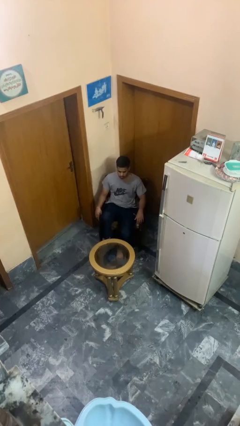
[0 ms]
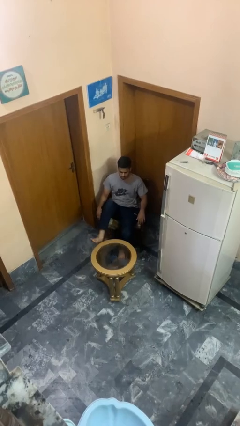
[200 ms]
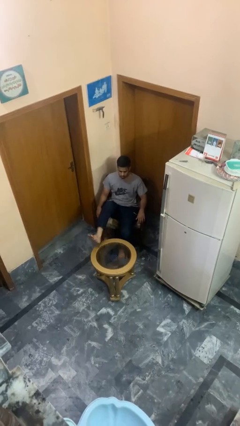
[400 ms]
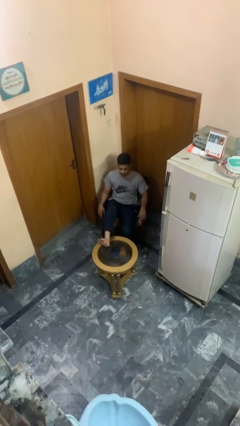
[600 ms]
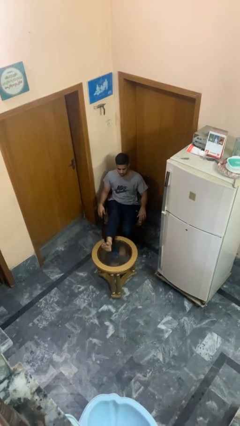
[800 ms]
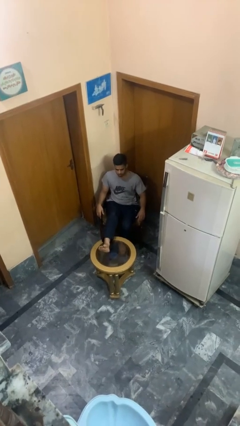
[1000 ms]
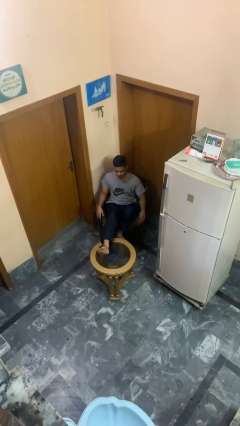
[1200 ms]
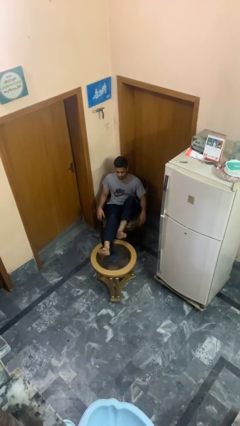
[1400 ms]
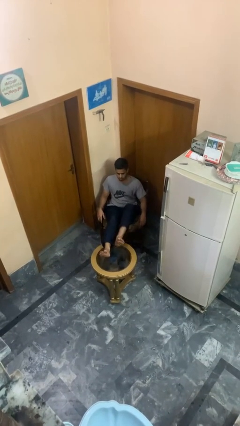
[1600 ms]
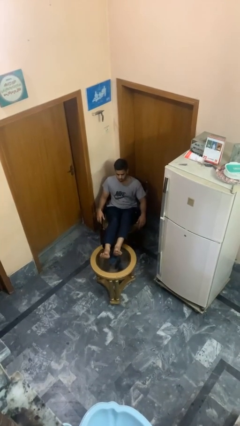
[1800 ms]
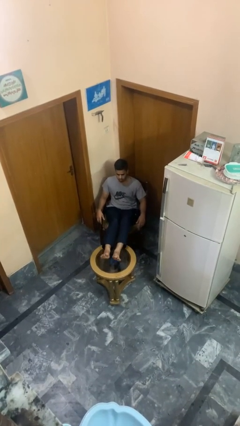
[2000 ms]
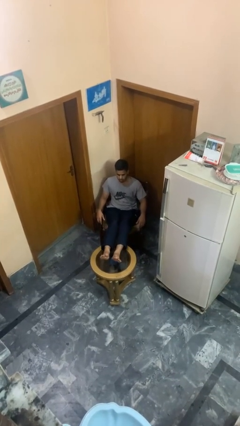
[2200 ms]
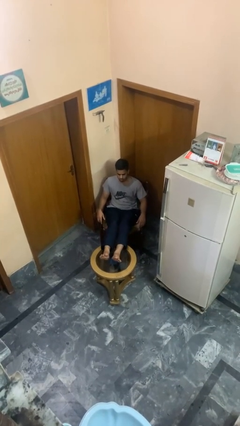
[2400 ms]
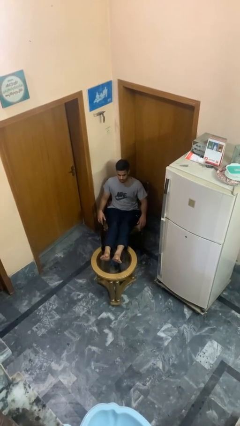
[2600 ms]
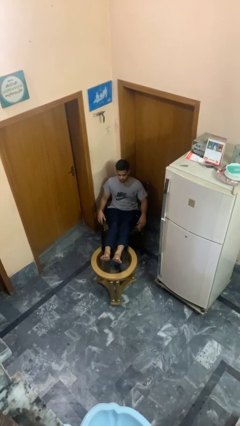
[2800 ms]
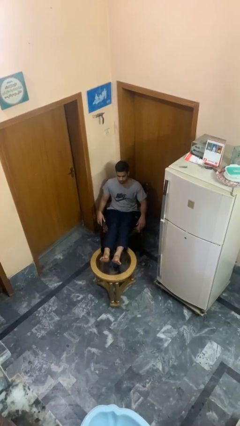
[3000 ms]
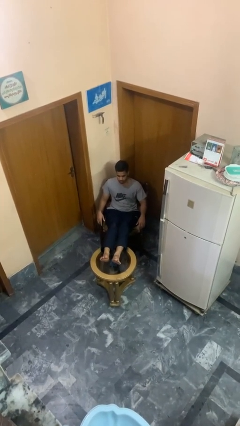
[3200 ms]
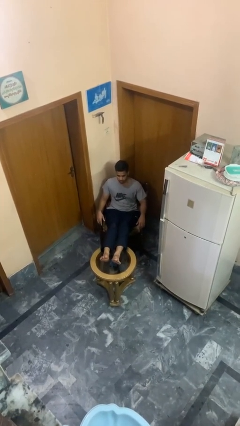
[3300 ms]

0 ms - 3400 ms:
person puts feet up

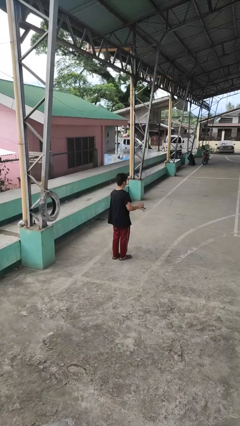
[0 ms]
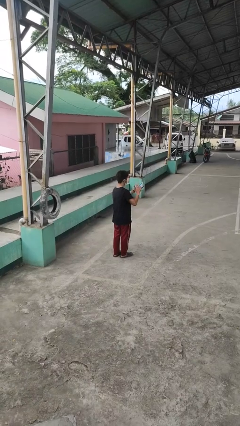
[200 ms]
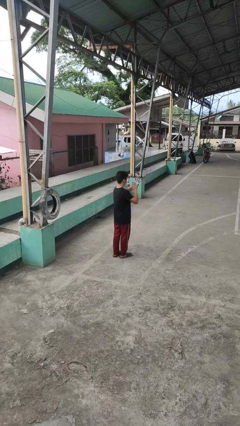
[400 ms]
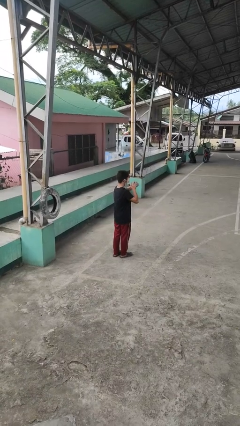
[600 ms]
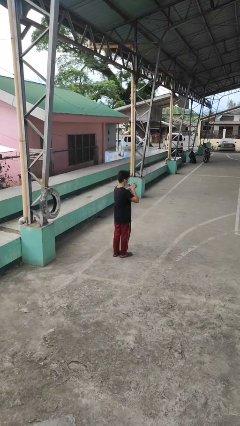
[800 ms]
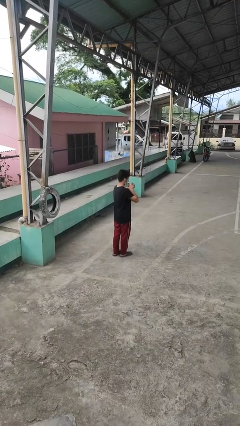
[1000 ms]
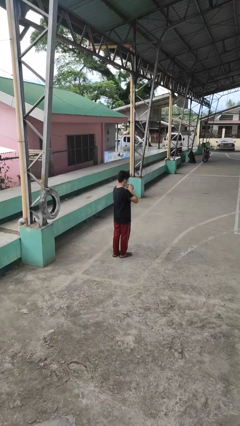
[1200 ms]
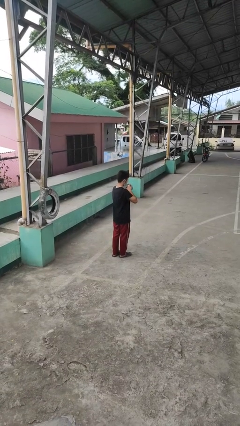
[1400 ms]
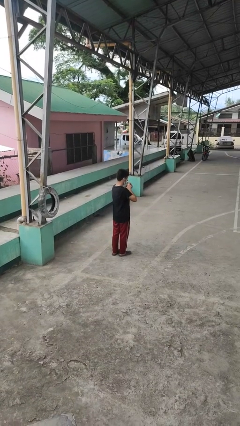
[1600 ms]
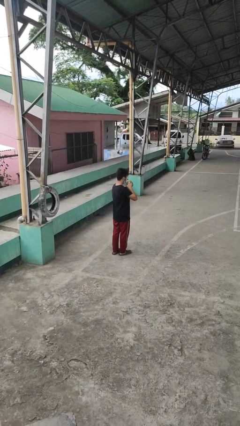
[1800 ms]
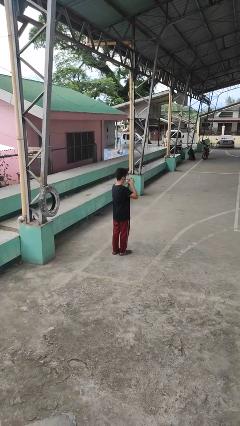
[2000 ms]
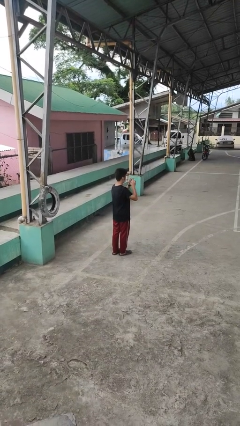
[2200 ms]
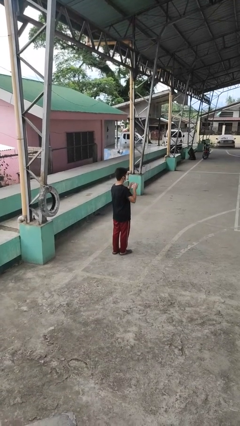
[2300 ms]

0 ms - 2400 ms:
person squeezes object

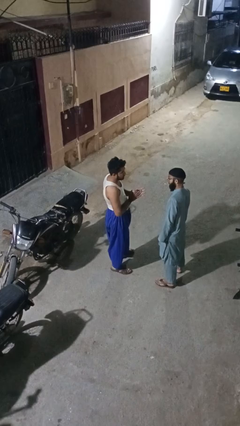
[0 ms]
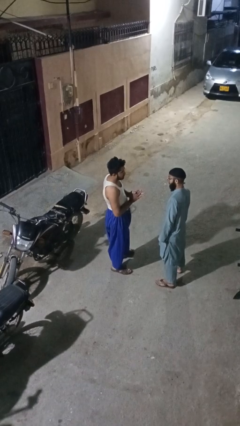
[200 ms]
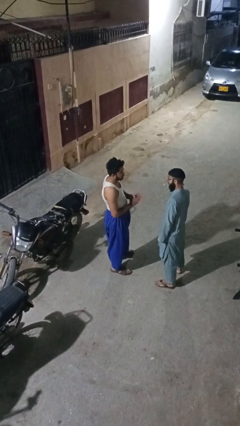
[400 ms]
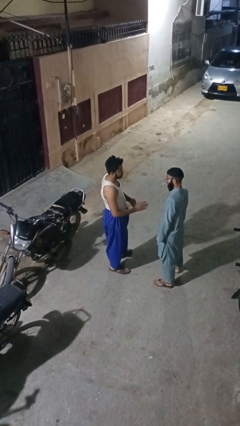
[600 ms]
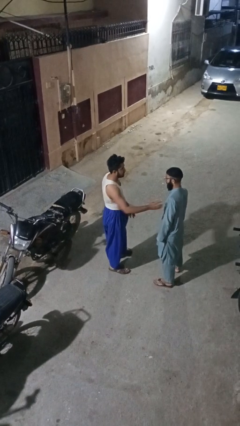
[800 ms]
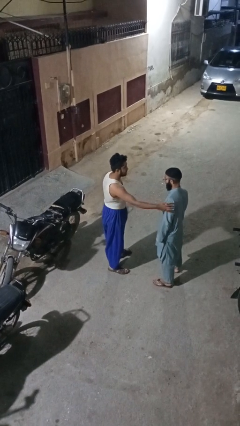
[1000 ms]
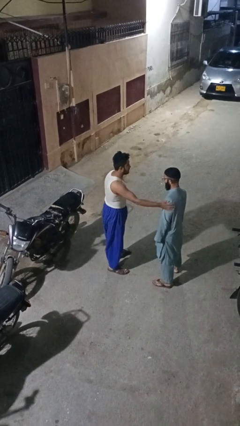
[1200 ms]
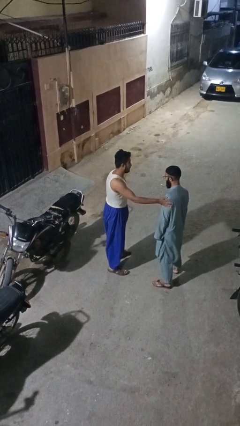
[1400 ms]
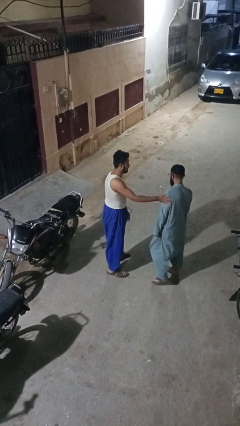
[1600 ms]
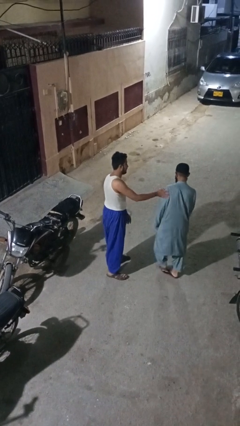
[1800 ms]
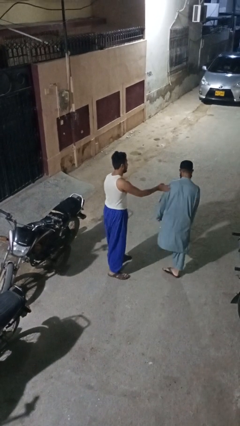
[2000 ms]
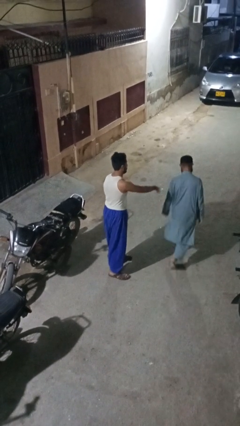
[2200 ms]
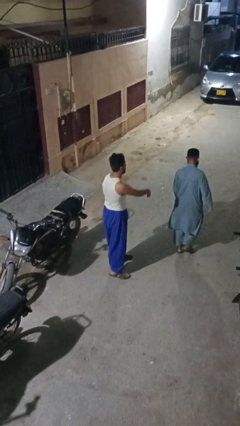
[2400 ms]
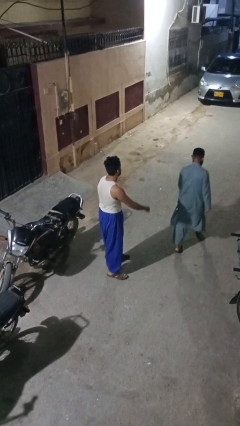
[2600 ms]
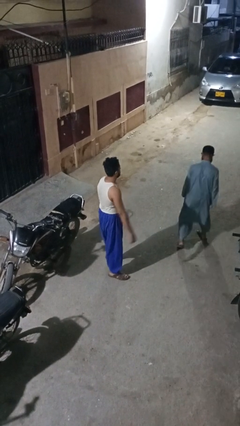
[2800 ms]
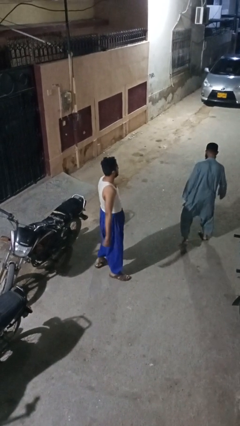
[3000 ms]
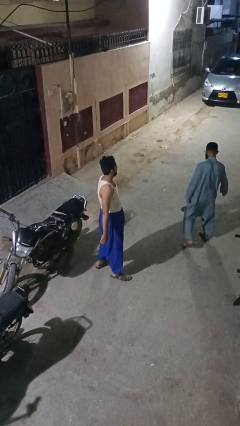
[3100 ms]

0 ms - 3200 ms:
person shoves person

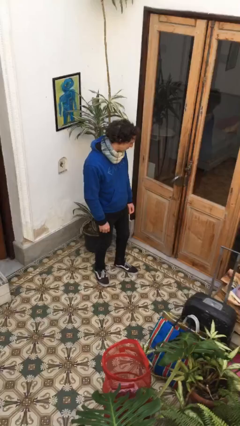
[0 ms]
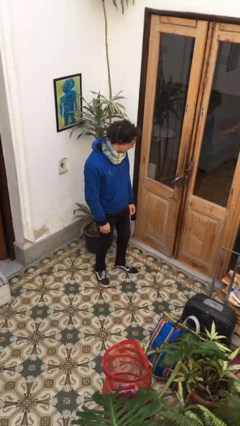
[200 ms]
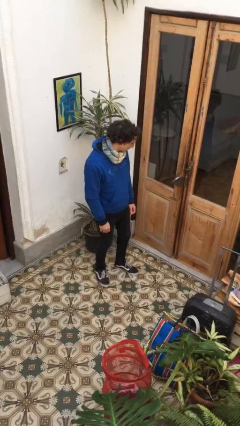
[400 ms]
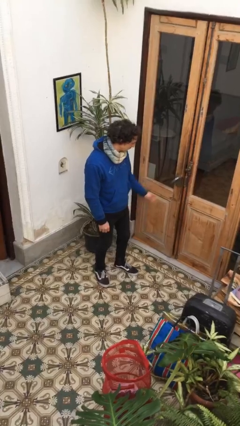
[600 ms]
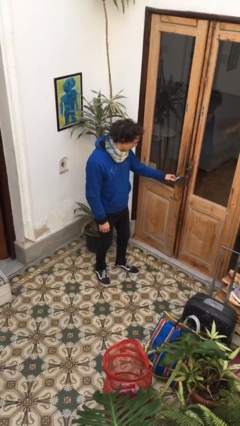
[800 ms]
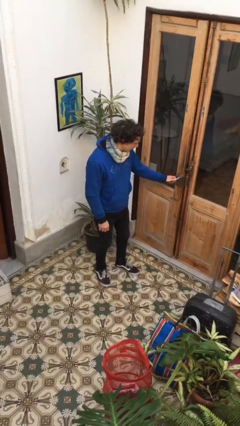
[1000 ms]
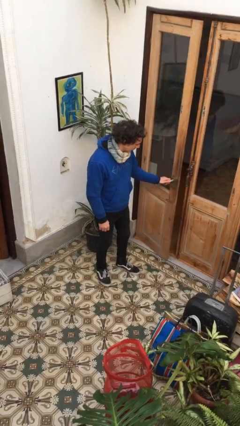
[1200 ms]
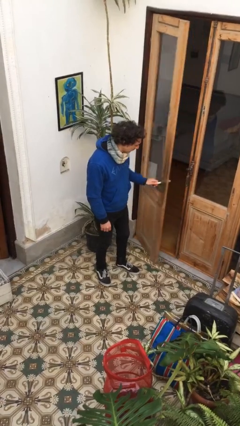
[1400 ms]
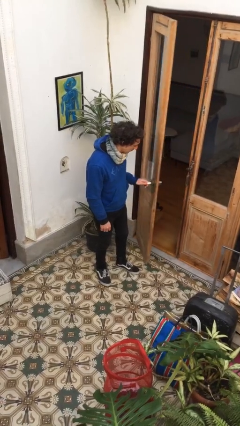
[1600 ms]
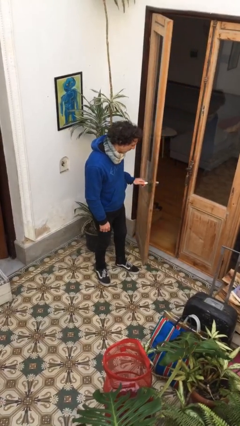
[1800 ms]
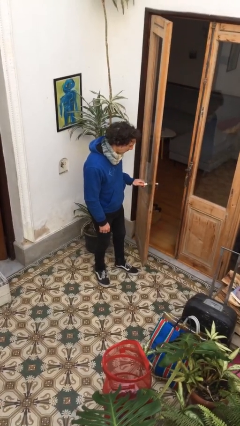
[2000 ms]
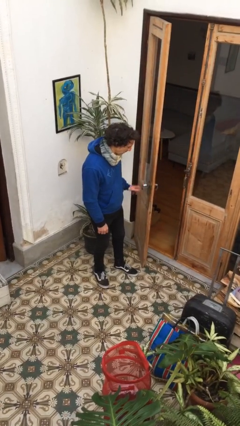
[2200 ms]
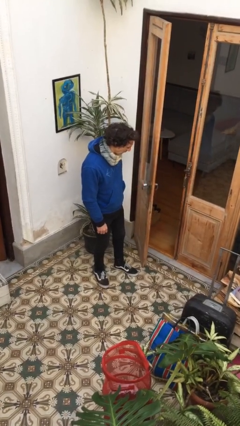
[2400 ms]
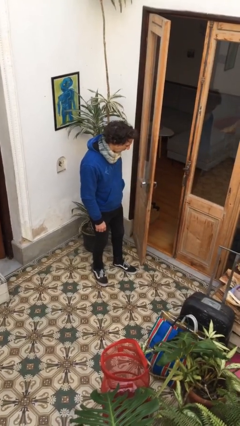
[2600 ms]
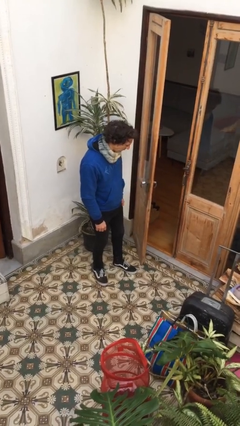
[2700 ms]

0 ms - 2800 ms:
person opens facility door

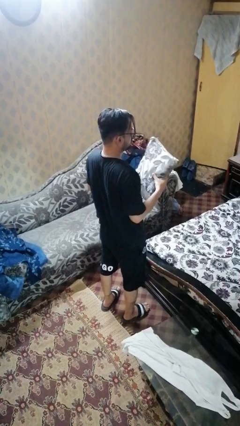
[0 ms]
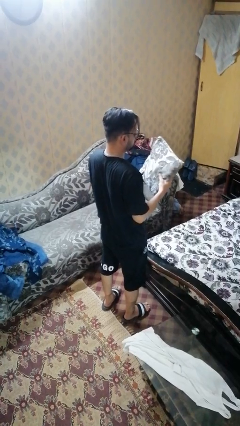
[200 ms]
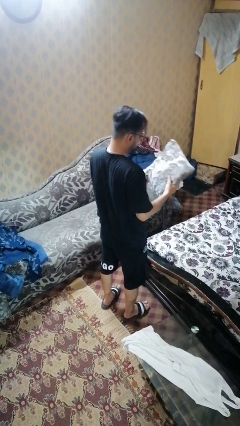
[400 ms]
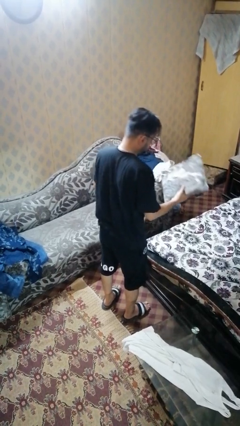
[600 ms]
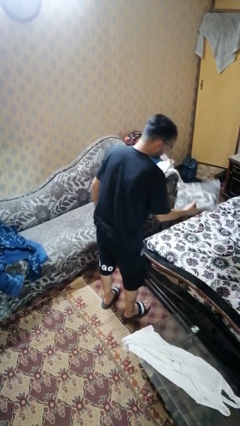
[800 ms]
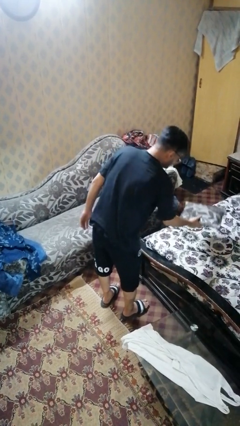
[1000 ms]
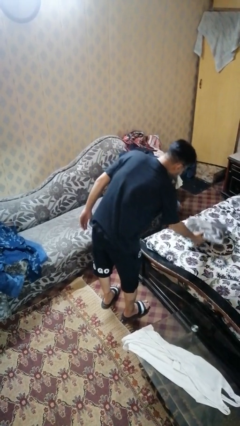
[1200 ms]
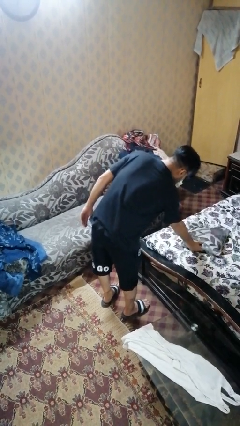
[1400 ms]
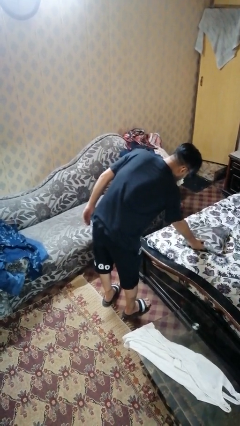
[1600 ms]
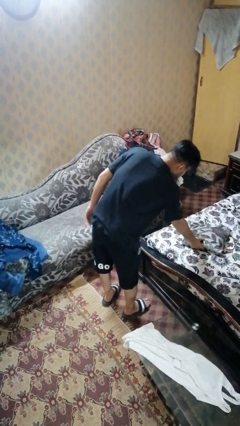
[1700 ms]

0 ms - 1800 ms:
person puts down object on bed

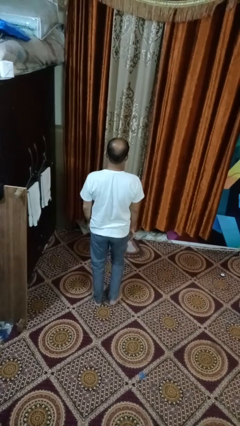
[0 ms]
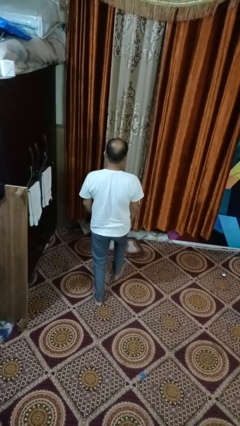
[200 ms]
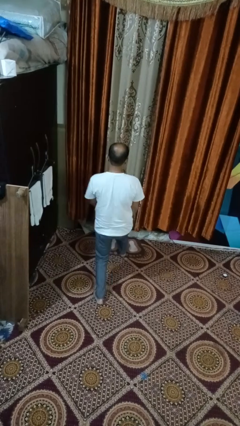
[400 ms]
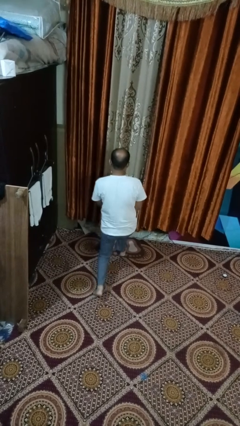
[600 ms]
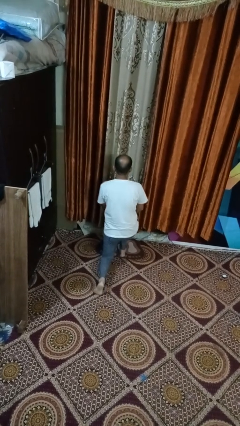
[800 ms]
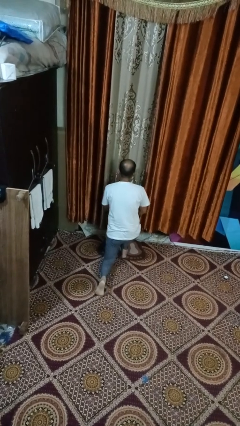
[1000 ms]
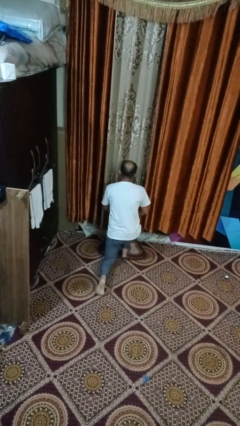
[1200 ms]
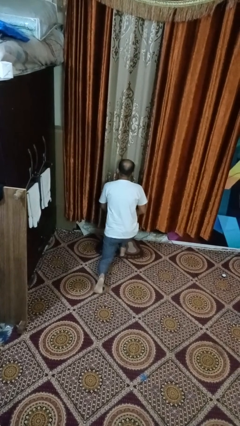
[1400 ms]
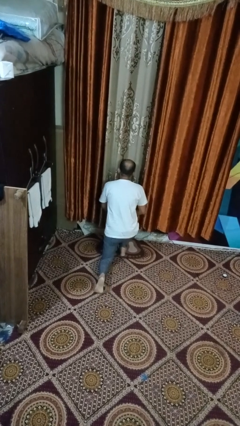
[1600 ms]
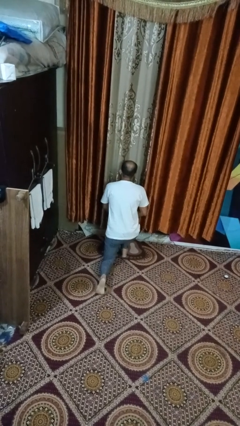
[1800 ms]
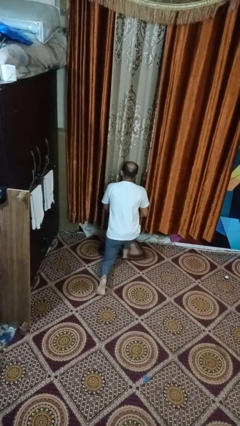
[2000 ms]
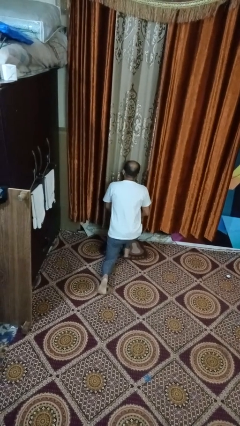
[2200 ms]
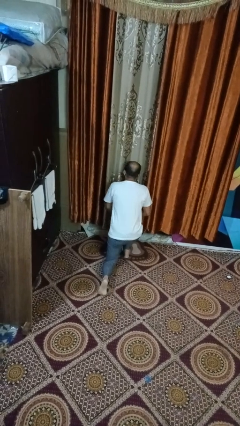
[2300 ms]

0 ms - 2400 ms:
person kneels

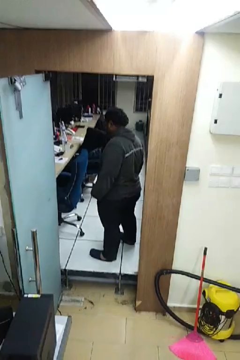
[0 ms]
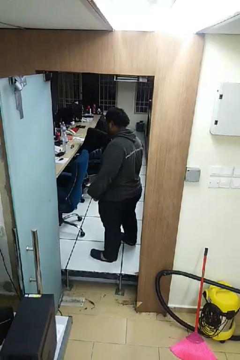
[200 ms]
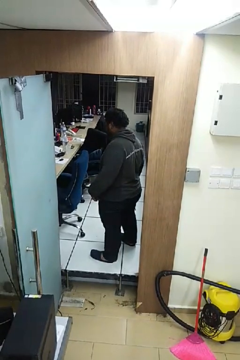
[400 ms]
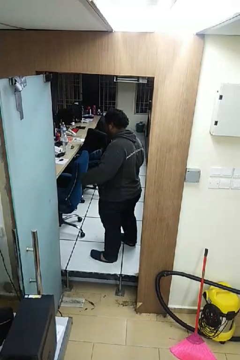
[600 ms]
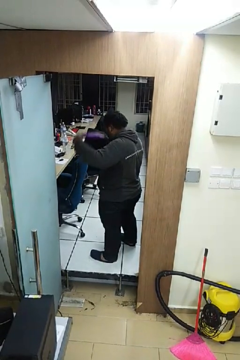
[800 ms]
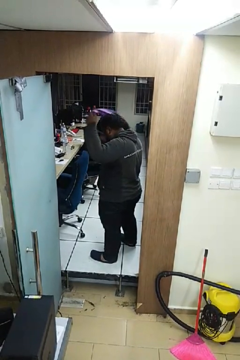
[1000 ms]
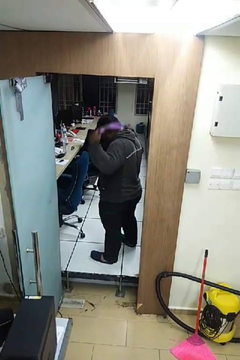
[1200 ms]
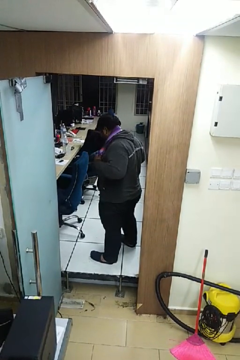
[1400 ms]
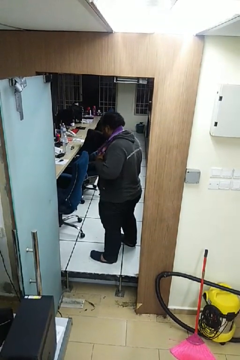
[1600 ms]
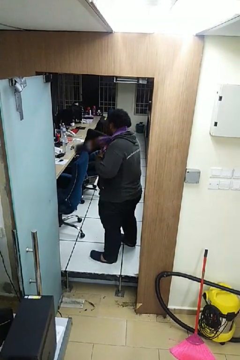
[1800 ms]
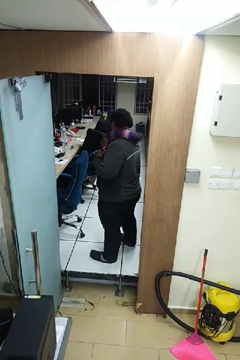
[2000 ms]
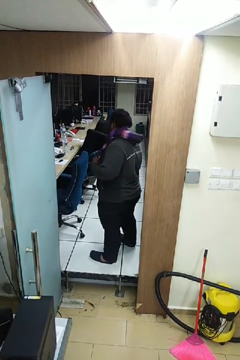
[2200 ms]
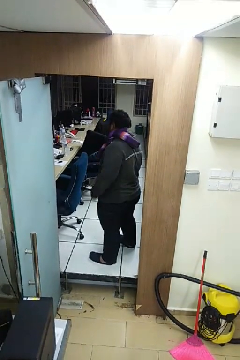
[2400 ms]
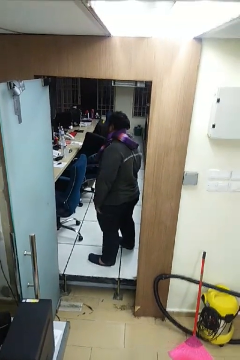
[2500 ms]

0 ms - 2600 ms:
person puts on scarf
